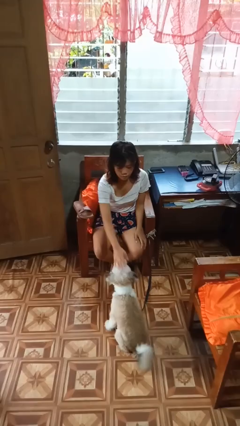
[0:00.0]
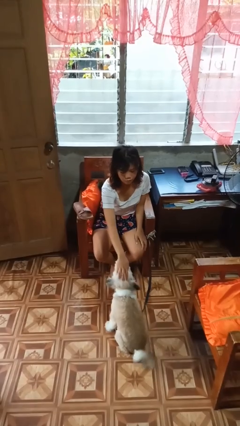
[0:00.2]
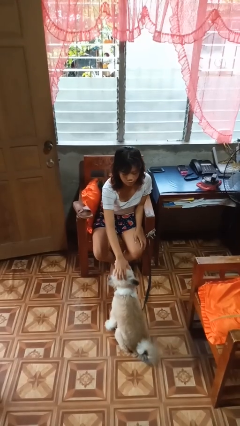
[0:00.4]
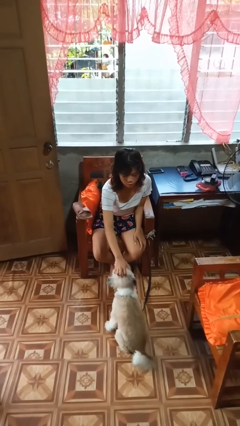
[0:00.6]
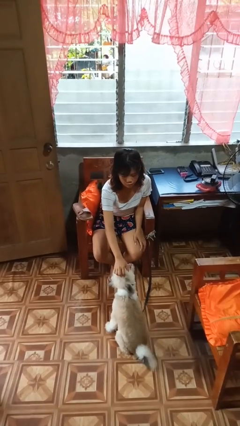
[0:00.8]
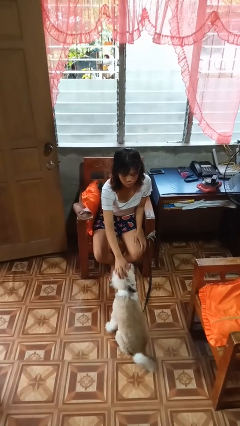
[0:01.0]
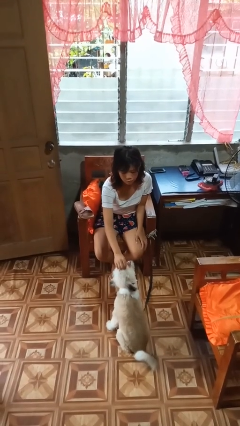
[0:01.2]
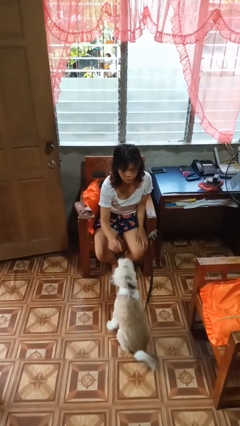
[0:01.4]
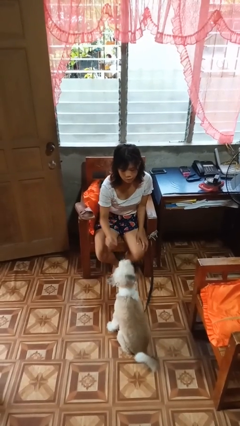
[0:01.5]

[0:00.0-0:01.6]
person pets dog

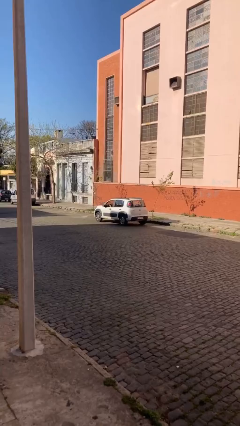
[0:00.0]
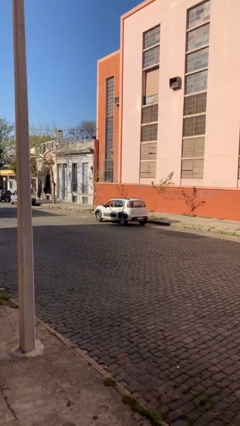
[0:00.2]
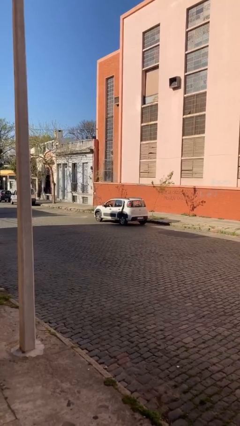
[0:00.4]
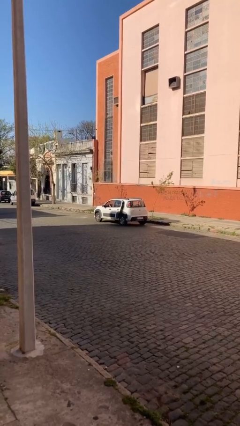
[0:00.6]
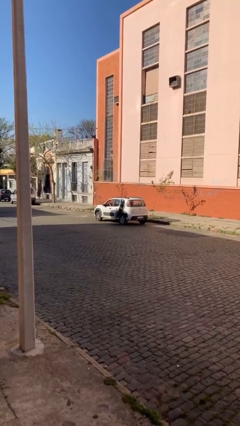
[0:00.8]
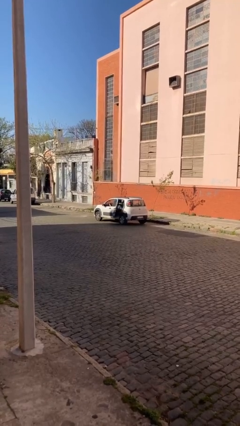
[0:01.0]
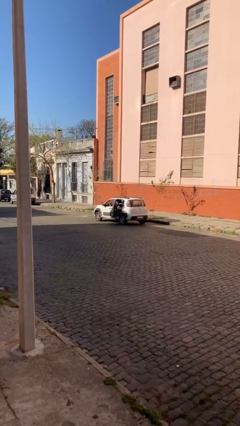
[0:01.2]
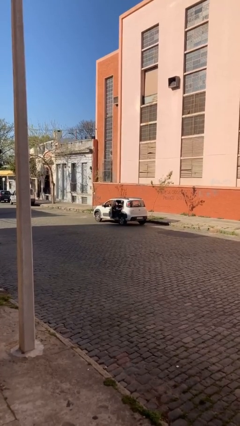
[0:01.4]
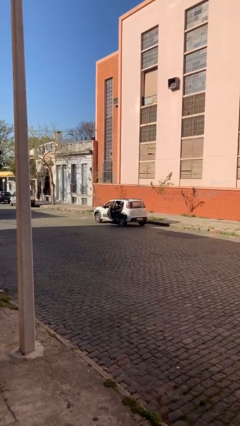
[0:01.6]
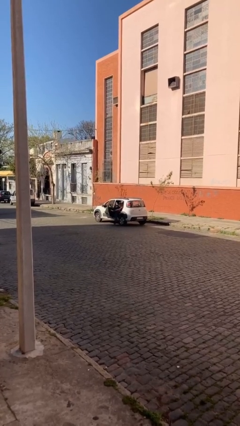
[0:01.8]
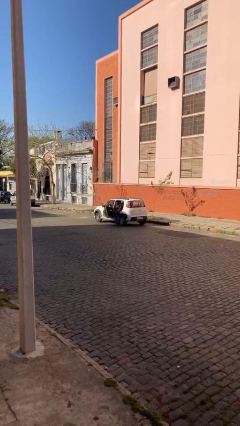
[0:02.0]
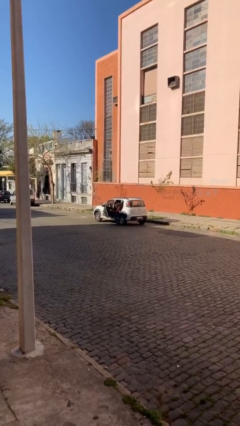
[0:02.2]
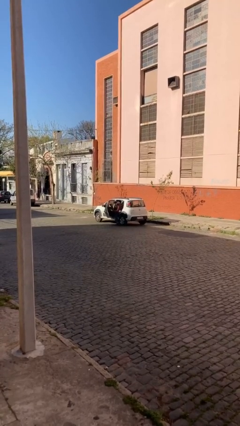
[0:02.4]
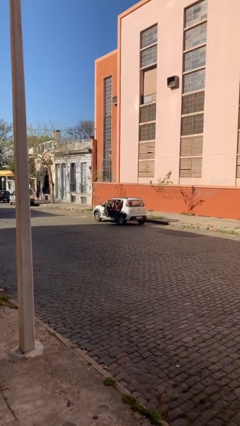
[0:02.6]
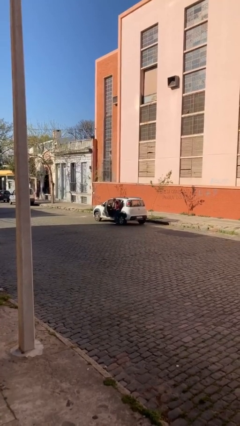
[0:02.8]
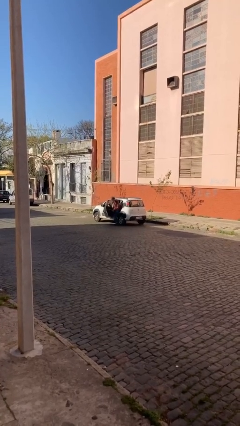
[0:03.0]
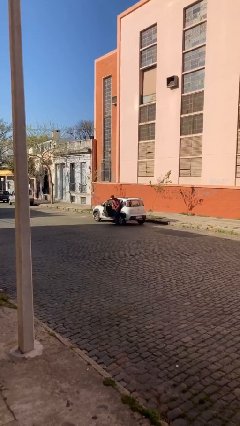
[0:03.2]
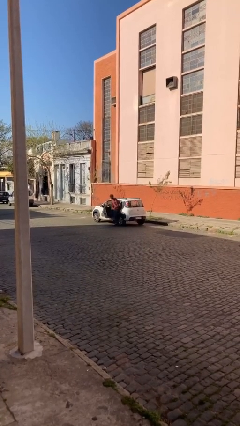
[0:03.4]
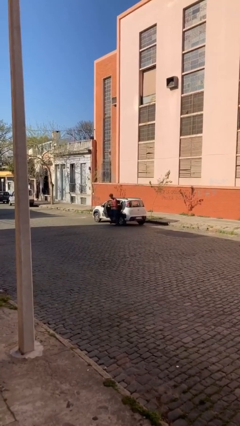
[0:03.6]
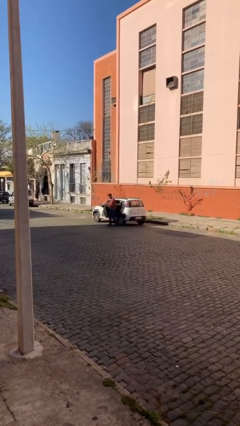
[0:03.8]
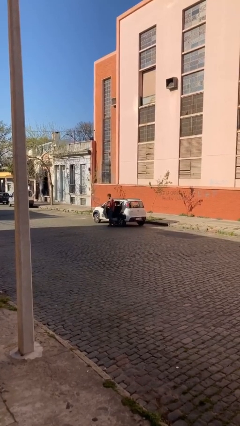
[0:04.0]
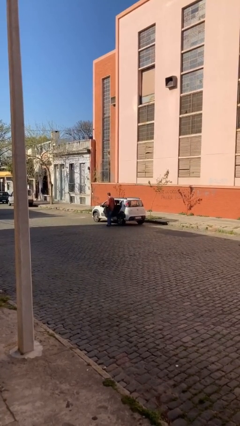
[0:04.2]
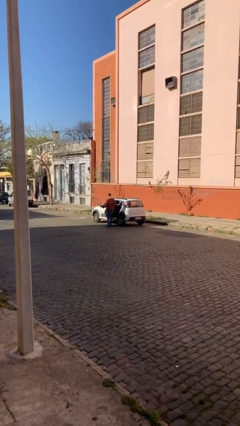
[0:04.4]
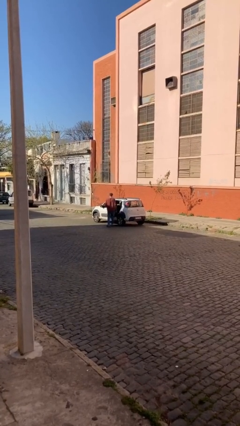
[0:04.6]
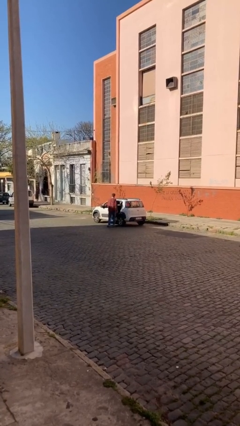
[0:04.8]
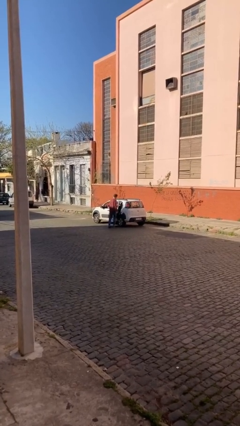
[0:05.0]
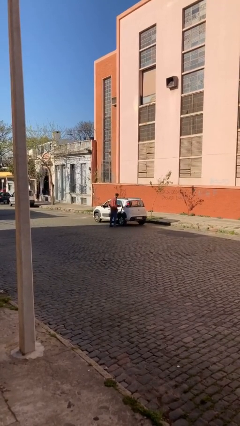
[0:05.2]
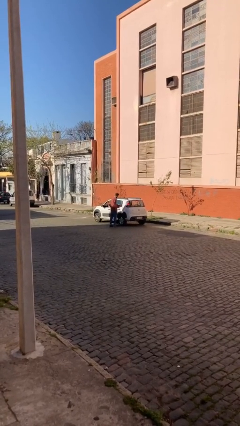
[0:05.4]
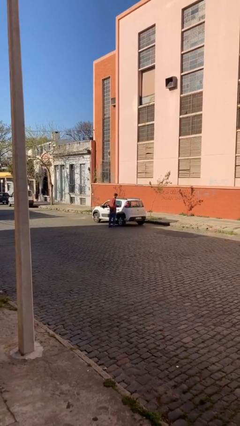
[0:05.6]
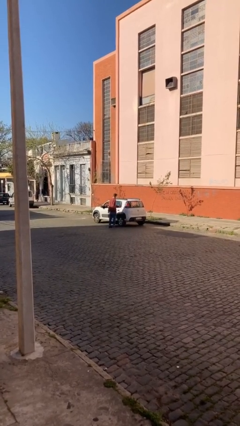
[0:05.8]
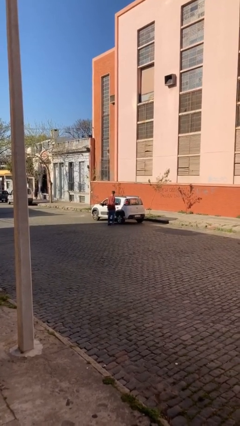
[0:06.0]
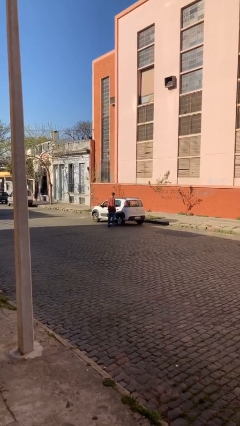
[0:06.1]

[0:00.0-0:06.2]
car drops off person

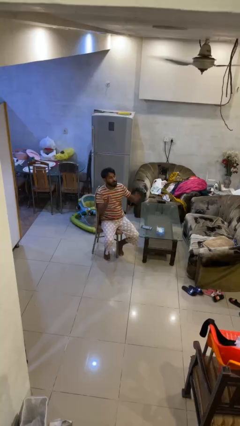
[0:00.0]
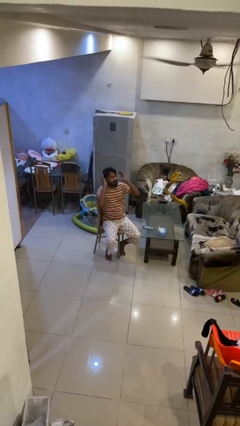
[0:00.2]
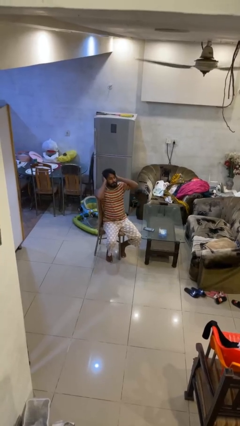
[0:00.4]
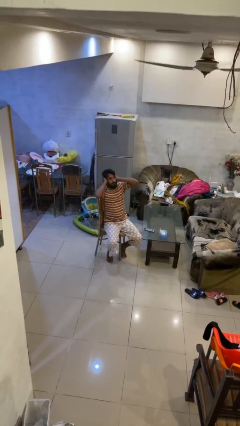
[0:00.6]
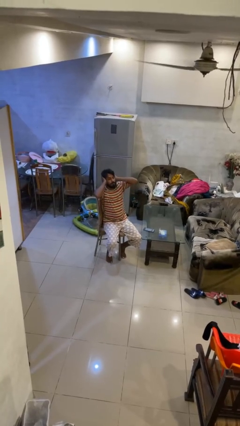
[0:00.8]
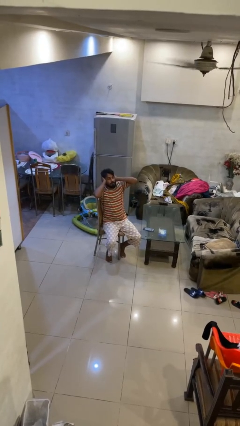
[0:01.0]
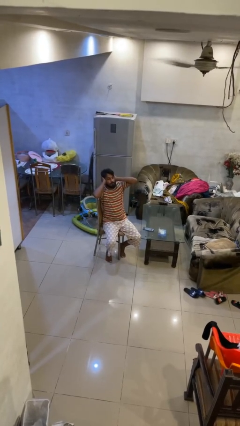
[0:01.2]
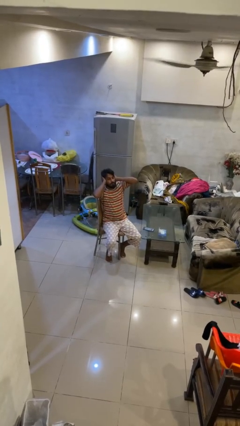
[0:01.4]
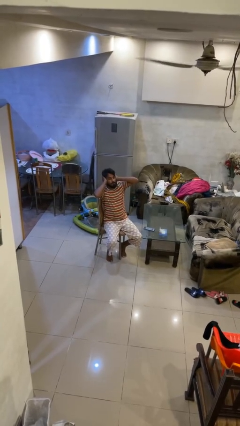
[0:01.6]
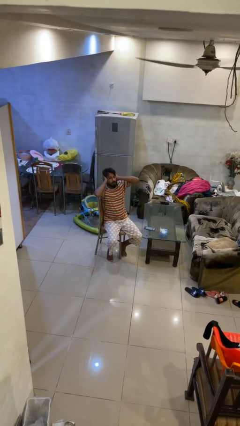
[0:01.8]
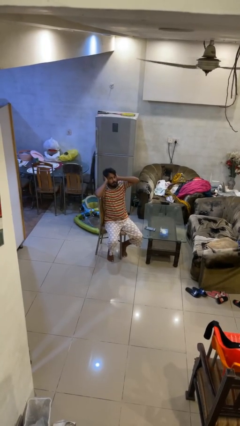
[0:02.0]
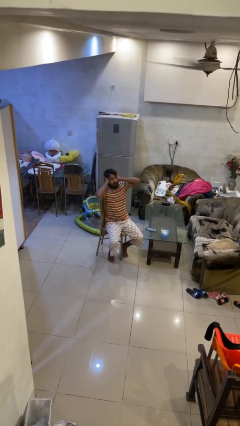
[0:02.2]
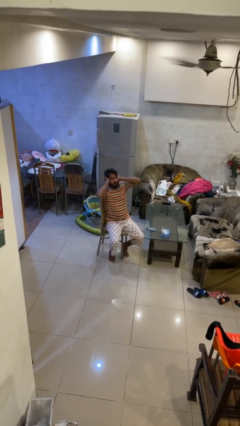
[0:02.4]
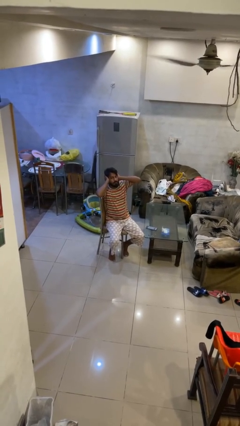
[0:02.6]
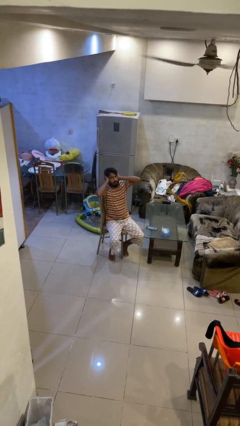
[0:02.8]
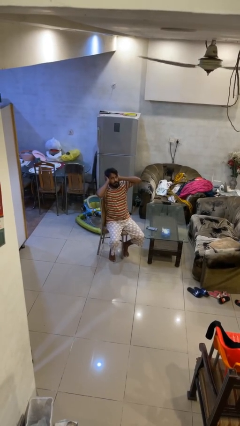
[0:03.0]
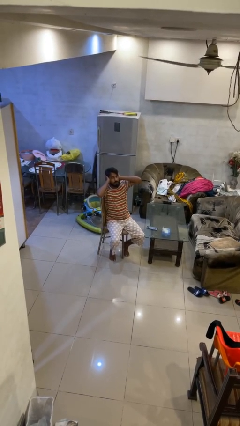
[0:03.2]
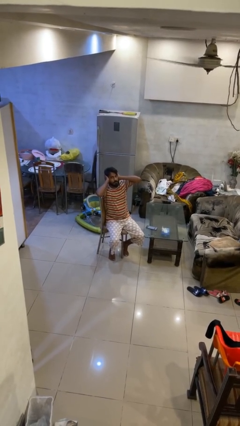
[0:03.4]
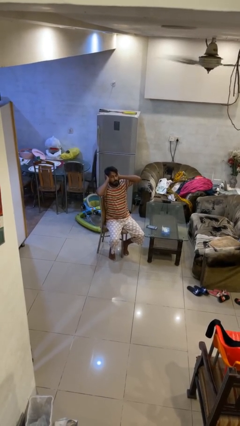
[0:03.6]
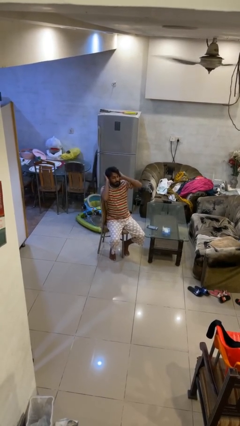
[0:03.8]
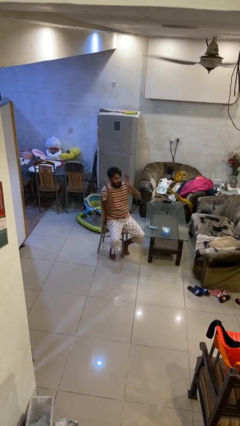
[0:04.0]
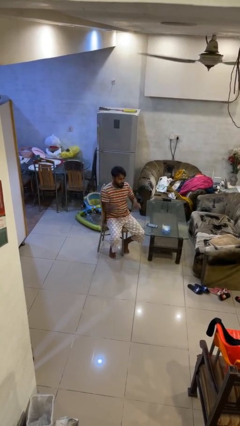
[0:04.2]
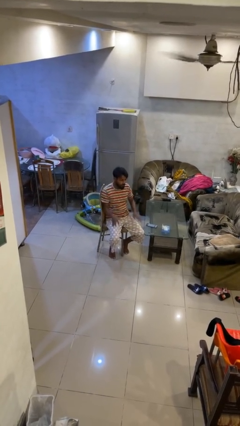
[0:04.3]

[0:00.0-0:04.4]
person puts fingers in ear

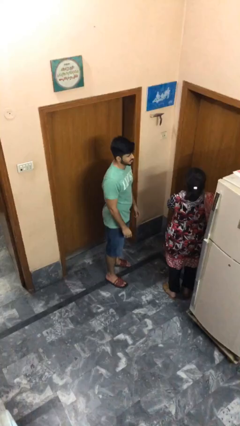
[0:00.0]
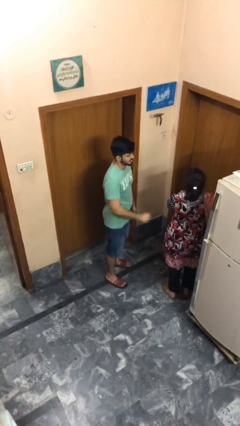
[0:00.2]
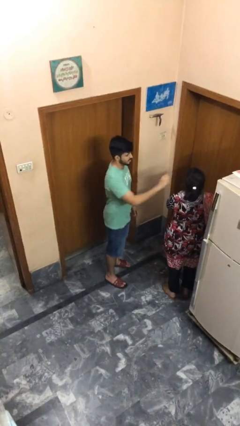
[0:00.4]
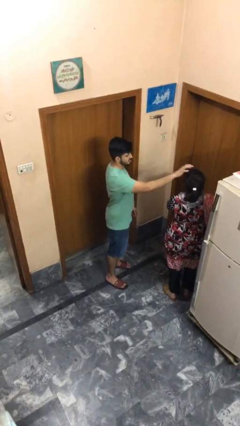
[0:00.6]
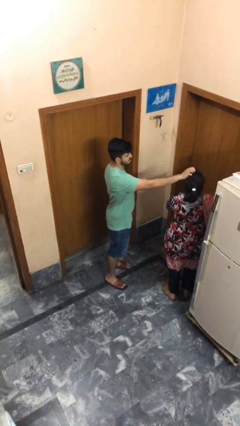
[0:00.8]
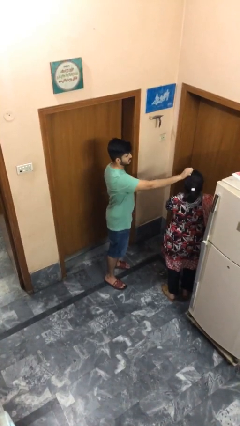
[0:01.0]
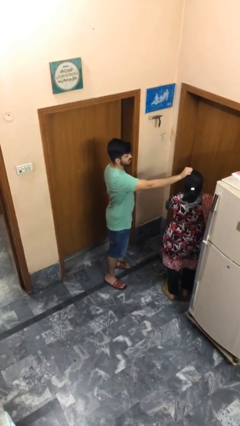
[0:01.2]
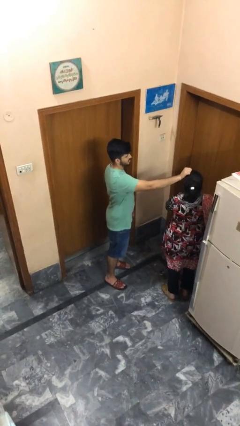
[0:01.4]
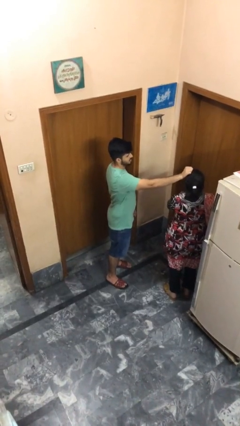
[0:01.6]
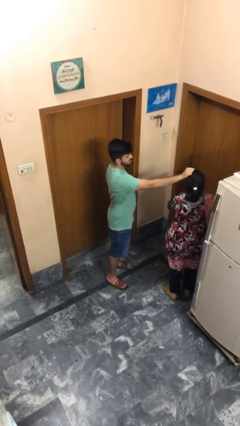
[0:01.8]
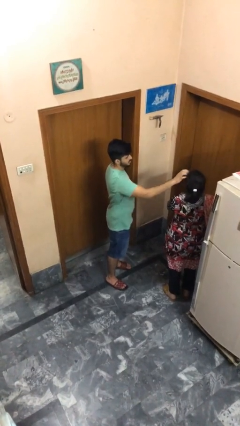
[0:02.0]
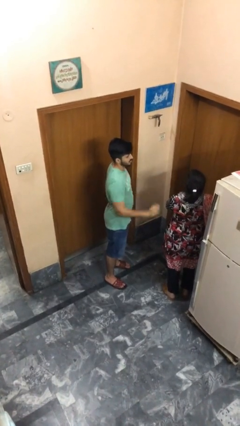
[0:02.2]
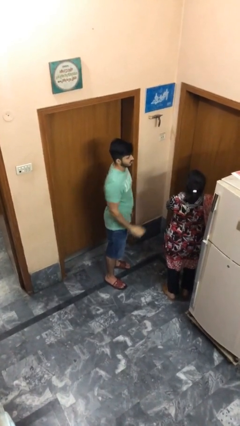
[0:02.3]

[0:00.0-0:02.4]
person grabs person by hair

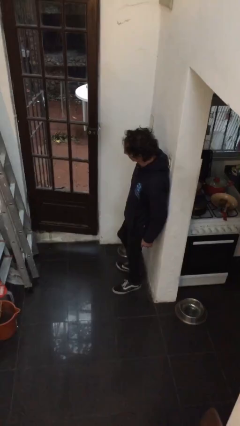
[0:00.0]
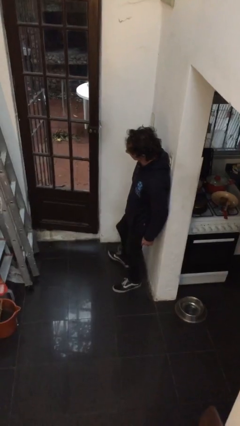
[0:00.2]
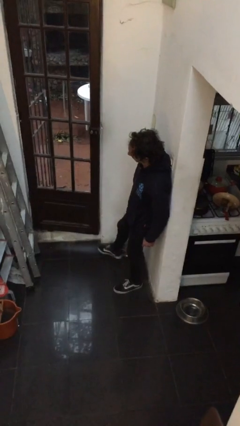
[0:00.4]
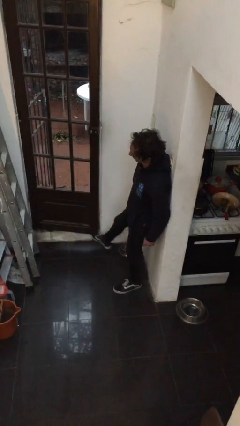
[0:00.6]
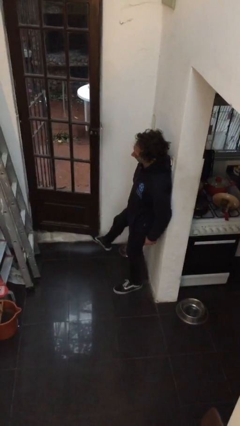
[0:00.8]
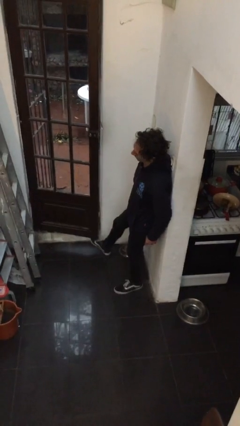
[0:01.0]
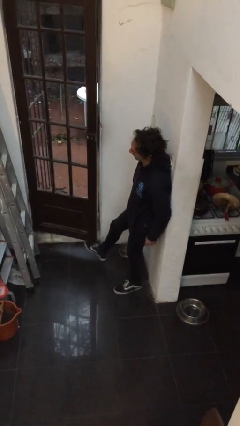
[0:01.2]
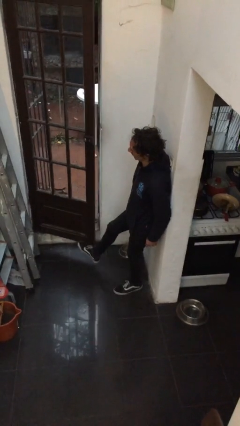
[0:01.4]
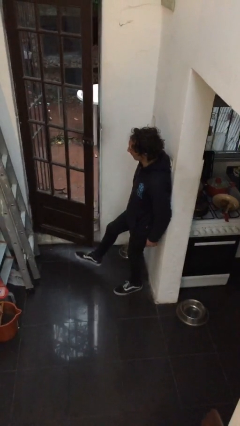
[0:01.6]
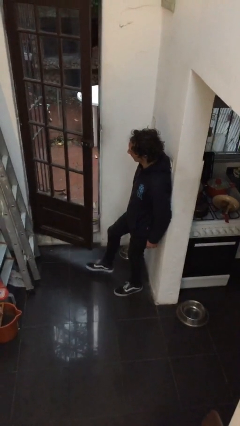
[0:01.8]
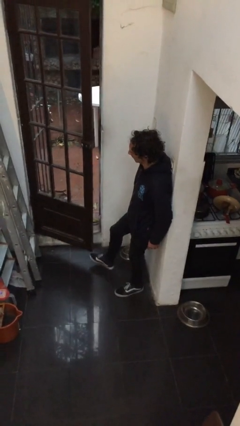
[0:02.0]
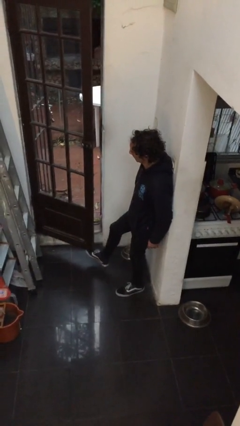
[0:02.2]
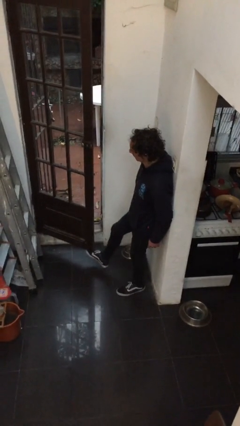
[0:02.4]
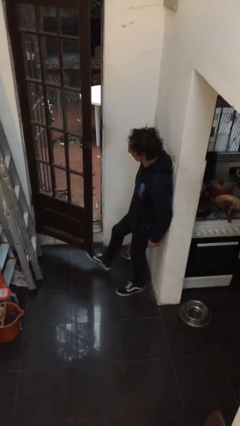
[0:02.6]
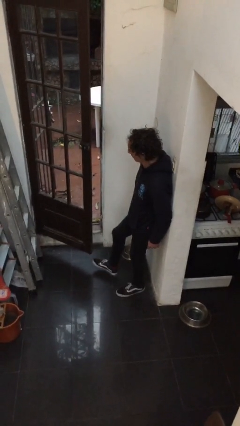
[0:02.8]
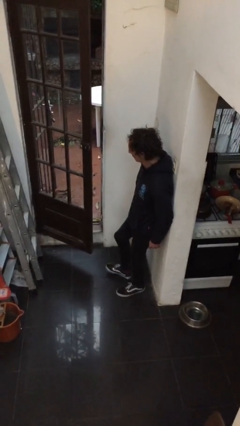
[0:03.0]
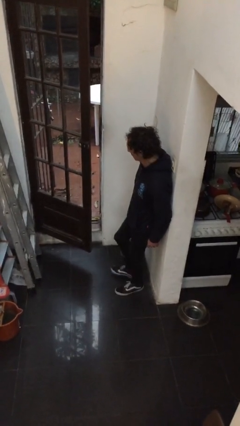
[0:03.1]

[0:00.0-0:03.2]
person opens facility door
